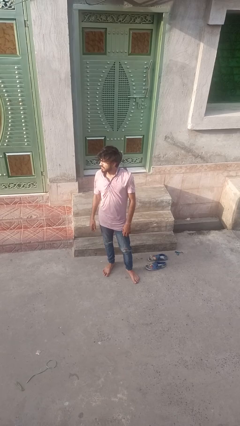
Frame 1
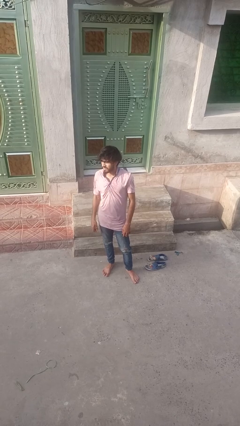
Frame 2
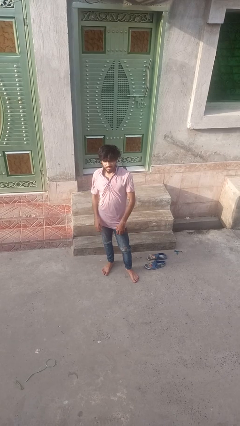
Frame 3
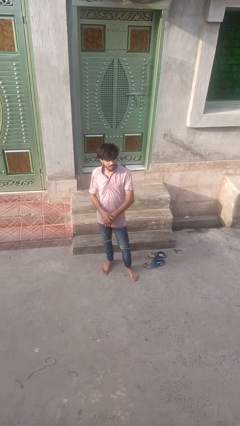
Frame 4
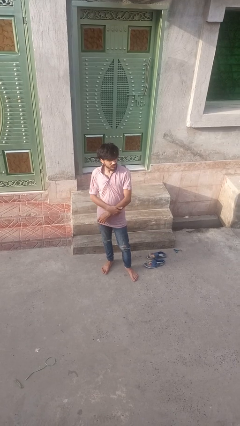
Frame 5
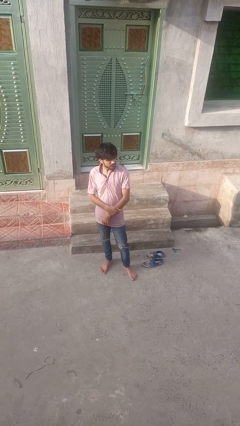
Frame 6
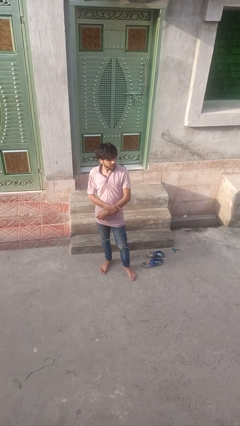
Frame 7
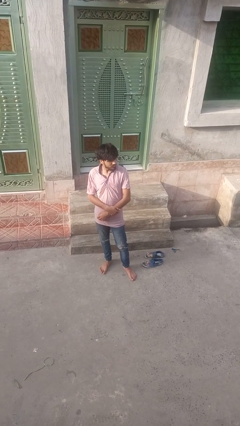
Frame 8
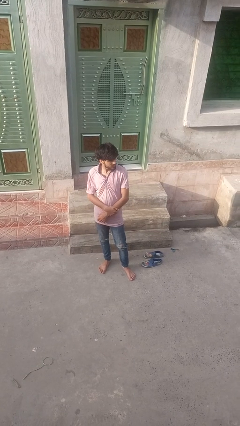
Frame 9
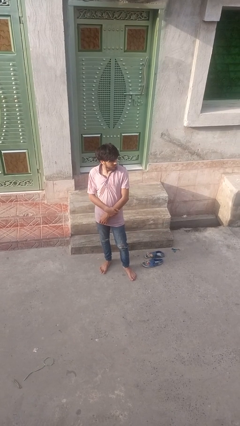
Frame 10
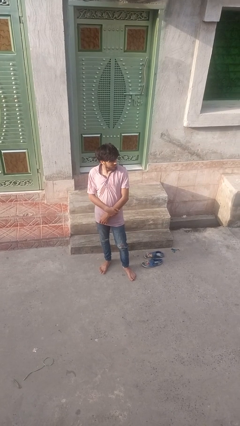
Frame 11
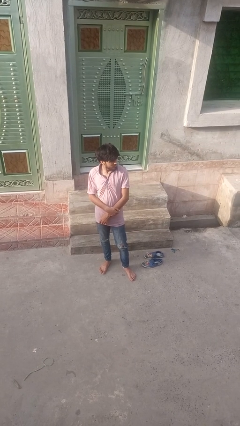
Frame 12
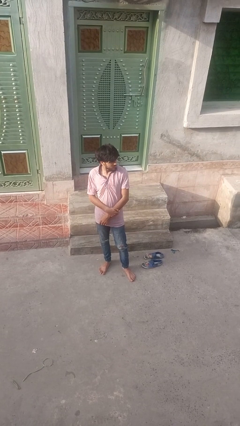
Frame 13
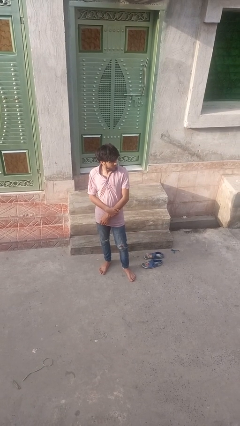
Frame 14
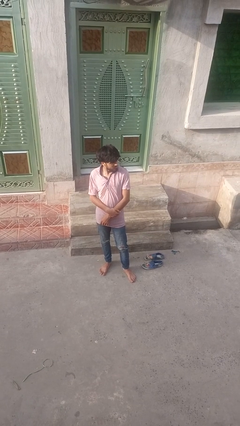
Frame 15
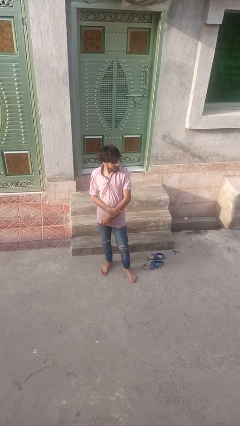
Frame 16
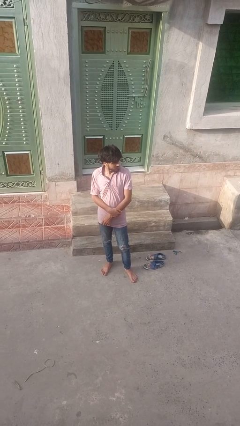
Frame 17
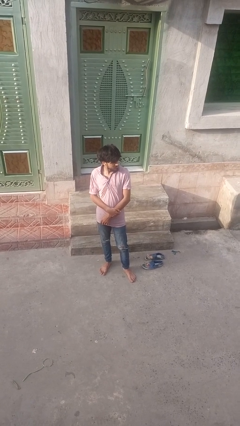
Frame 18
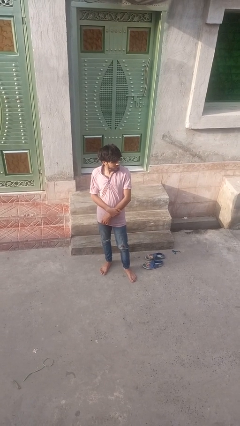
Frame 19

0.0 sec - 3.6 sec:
person crosses arms

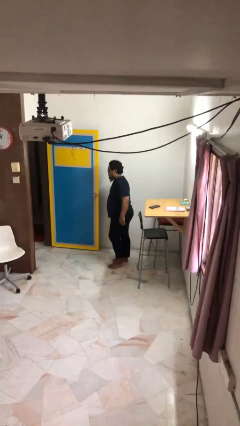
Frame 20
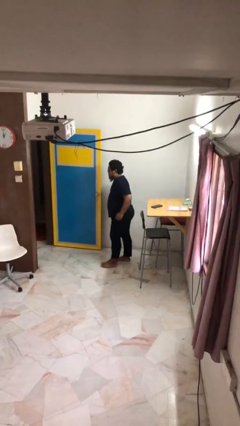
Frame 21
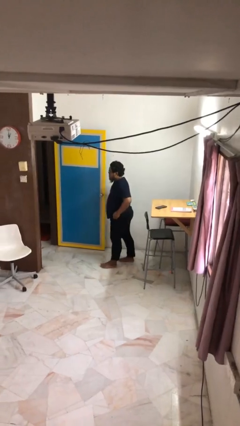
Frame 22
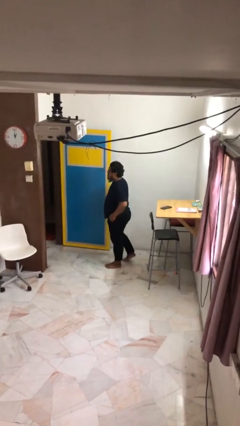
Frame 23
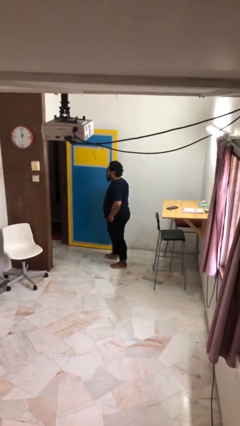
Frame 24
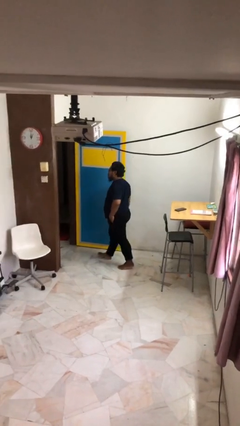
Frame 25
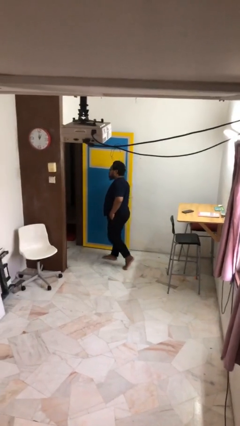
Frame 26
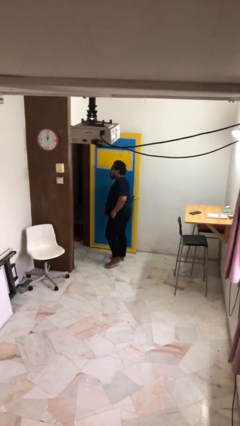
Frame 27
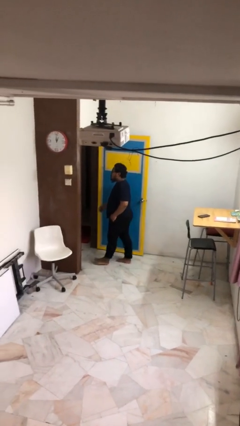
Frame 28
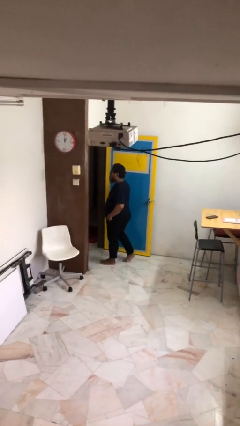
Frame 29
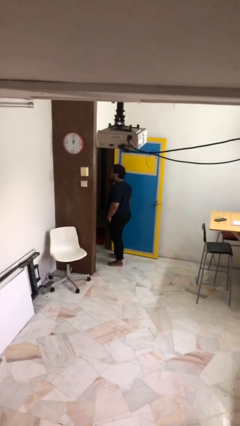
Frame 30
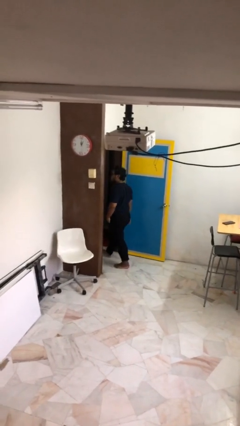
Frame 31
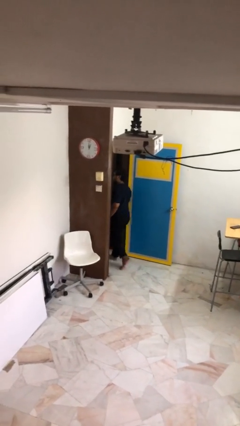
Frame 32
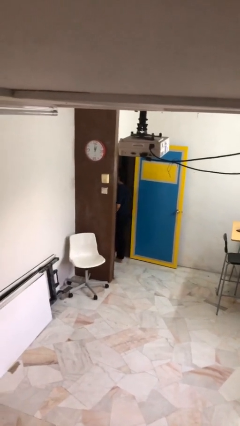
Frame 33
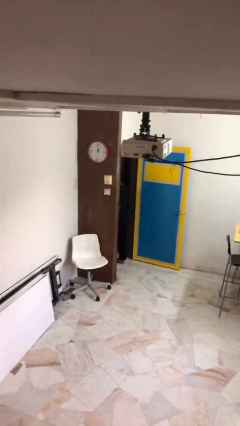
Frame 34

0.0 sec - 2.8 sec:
person exits scene through structure

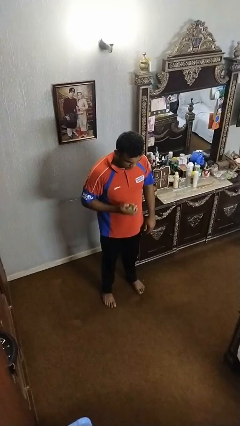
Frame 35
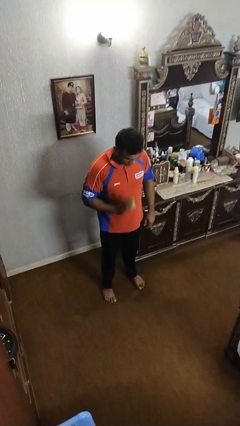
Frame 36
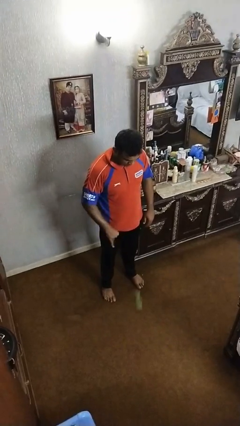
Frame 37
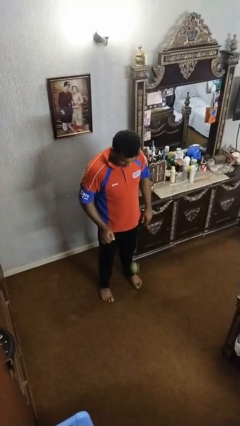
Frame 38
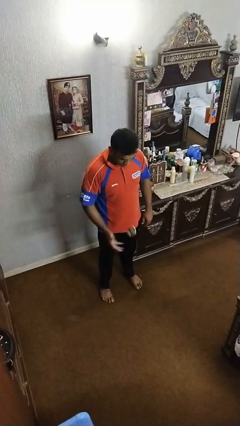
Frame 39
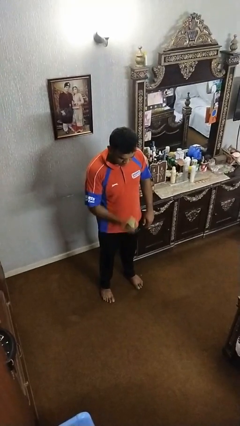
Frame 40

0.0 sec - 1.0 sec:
person bounces ball on floor

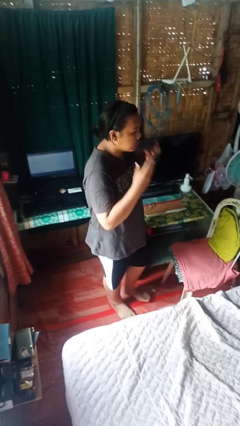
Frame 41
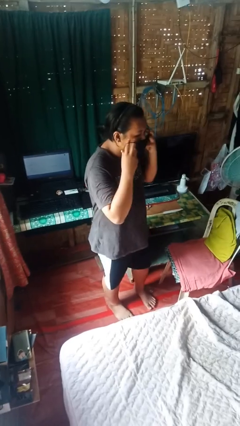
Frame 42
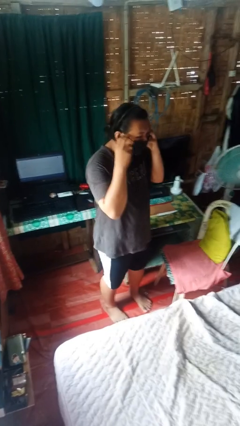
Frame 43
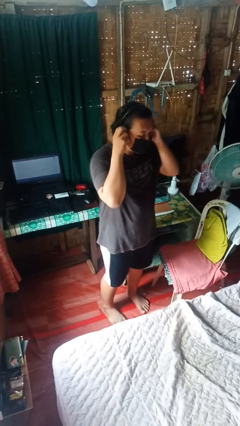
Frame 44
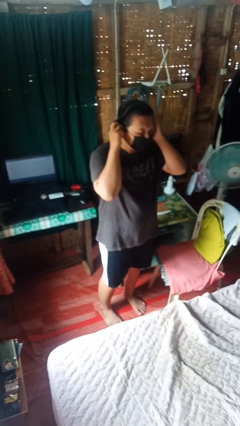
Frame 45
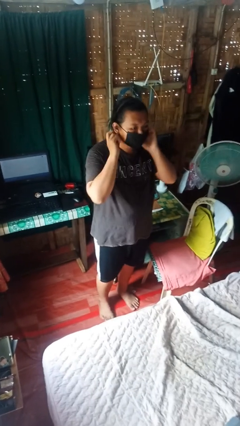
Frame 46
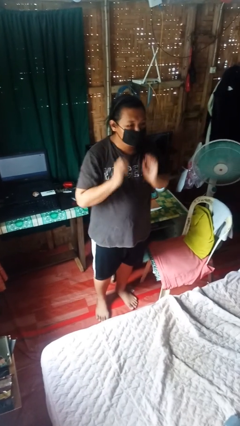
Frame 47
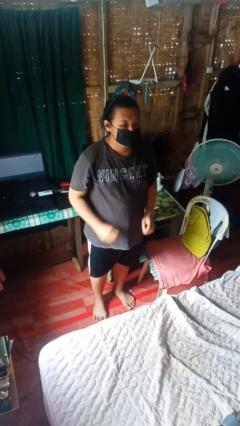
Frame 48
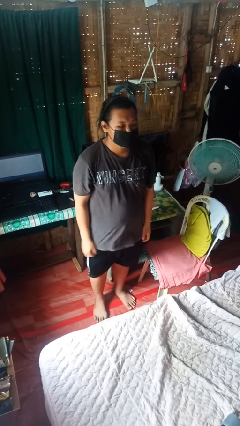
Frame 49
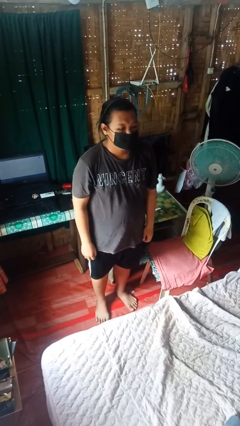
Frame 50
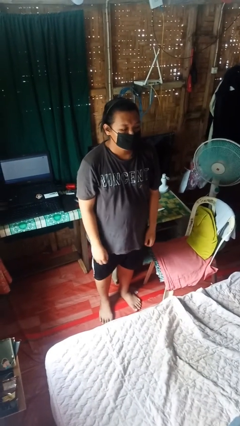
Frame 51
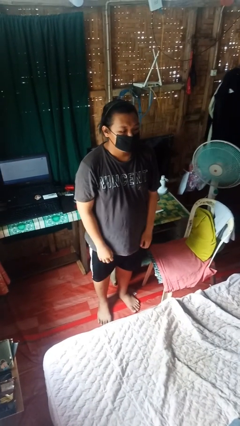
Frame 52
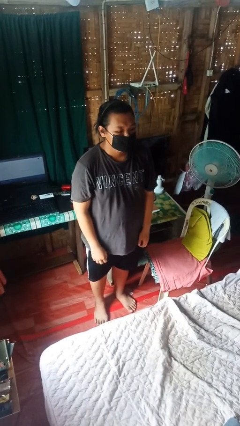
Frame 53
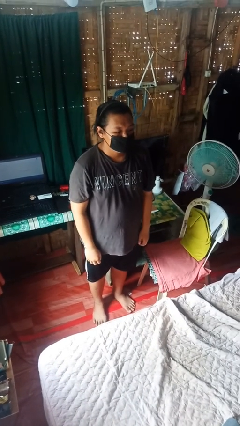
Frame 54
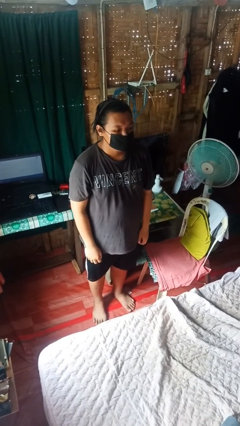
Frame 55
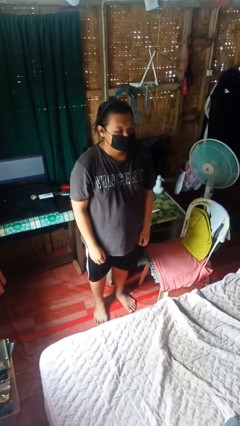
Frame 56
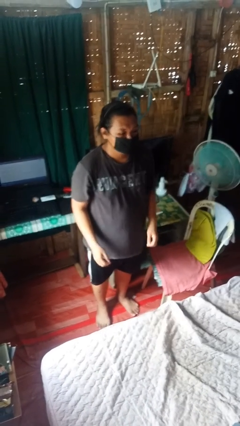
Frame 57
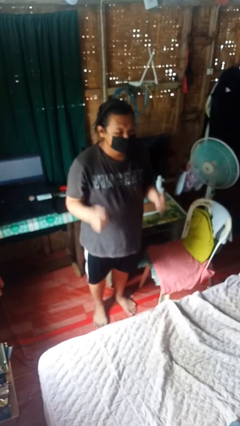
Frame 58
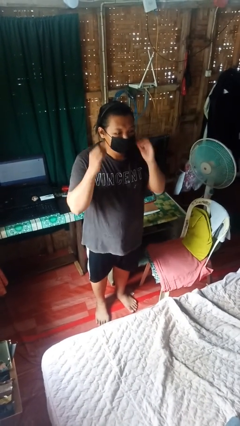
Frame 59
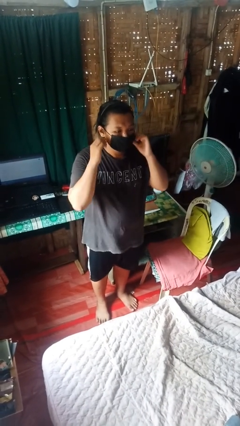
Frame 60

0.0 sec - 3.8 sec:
person puts on facemask

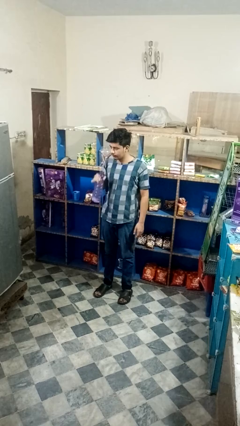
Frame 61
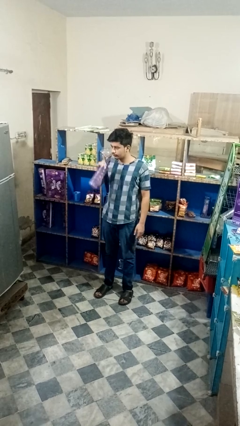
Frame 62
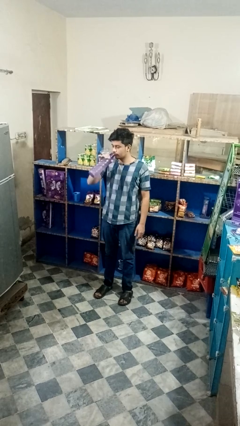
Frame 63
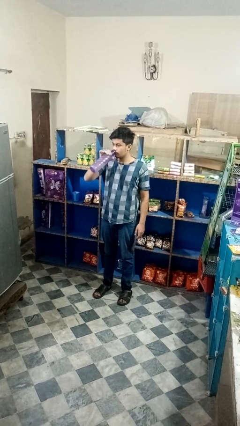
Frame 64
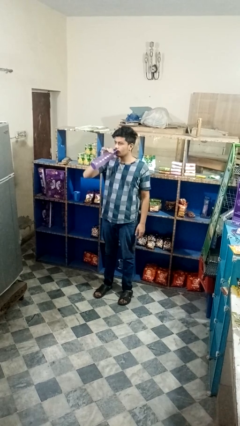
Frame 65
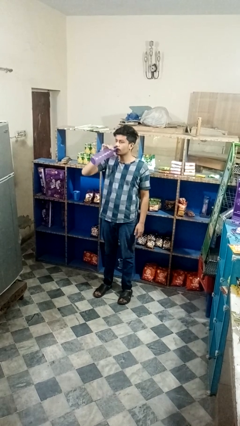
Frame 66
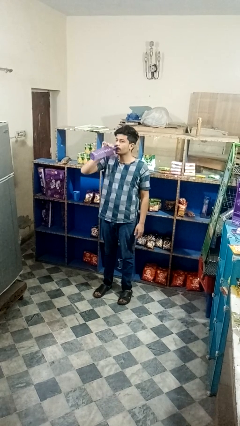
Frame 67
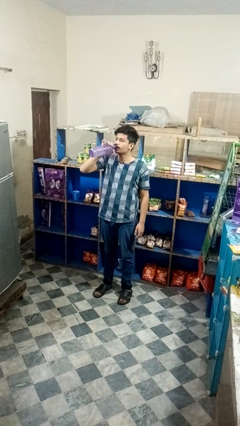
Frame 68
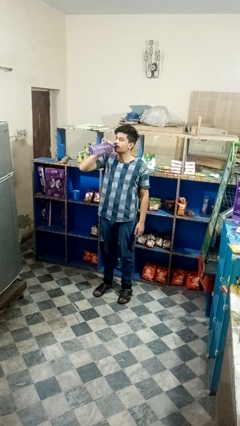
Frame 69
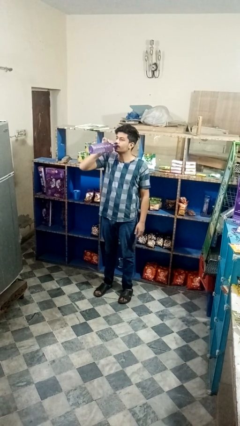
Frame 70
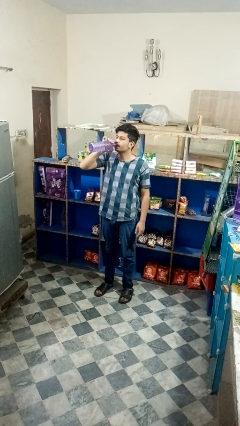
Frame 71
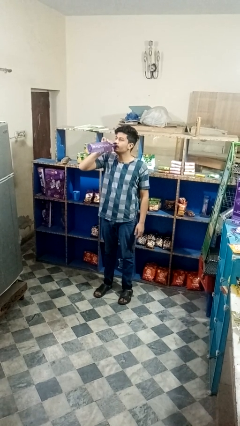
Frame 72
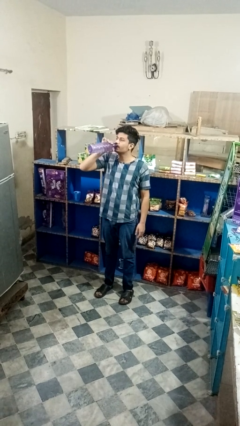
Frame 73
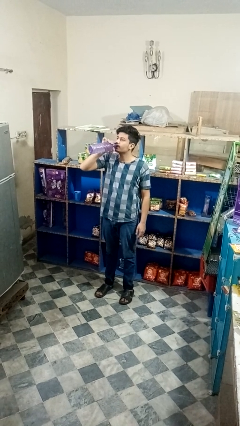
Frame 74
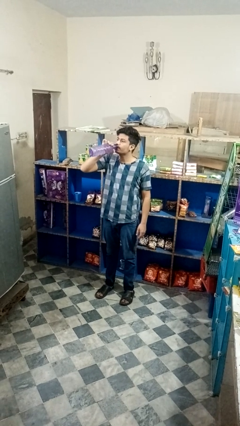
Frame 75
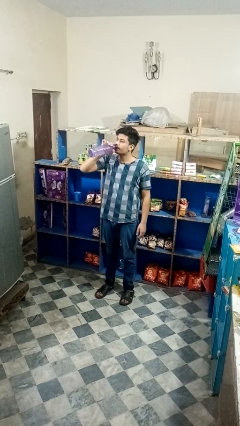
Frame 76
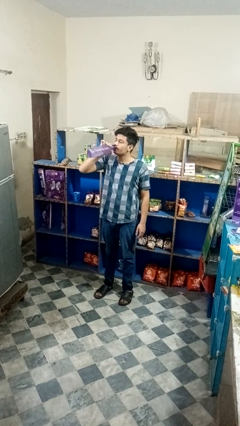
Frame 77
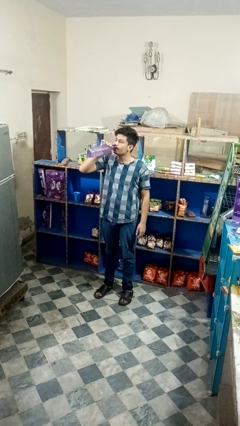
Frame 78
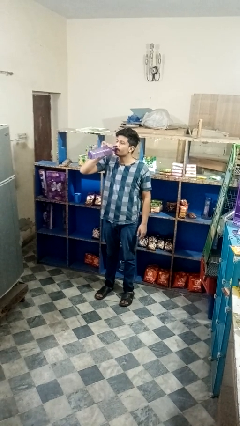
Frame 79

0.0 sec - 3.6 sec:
person drinks from bottle

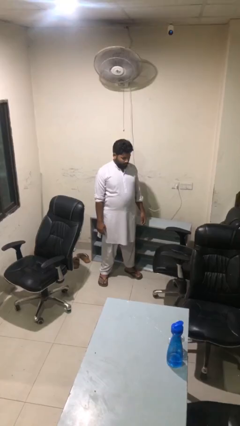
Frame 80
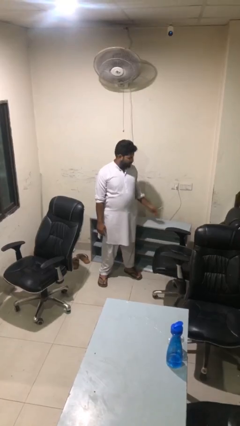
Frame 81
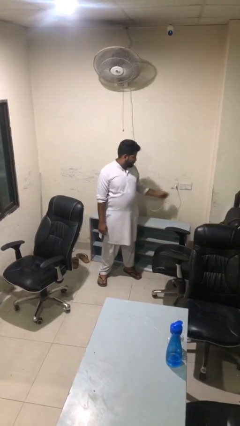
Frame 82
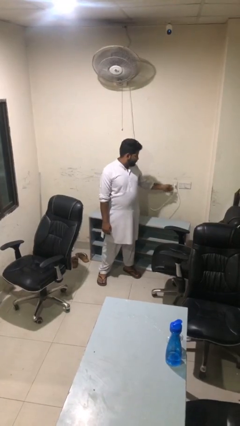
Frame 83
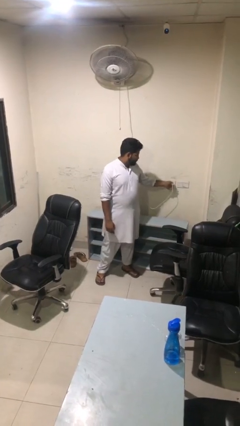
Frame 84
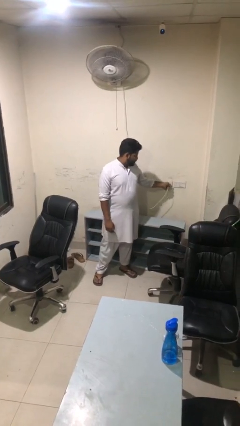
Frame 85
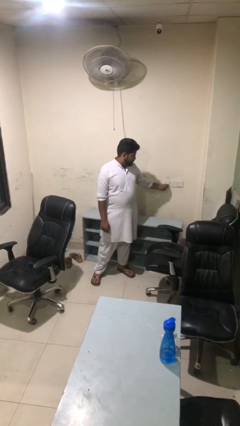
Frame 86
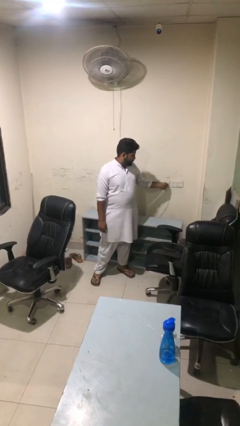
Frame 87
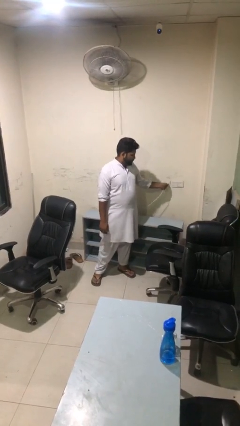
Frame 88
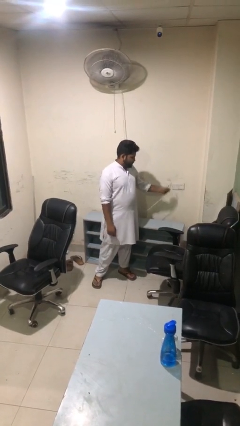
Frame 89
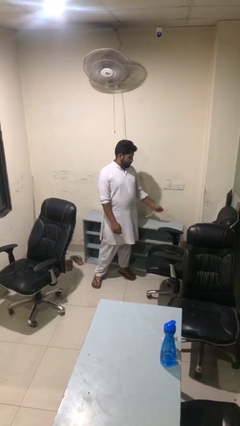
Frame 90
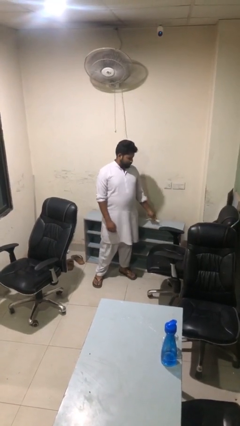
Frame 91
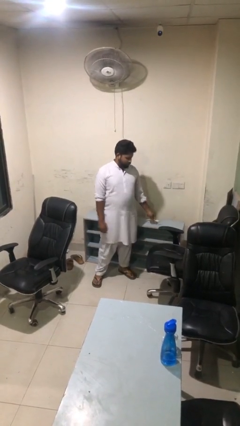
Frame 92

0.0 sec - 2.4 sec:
person unplugs from electrical socket

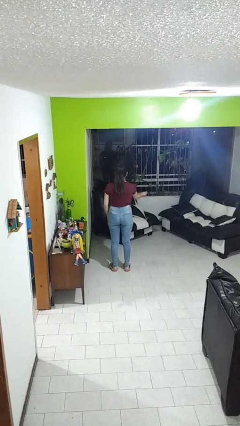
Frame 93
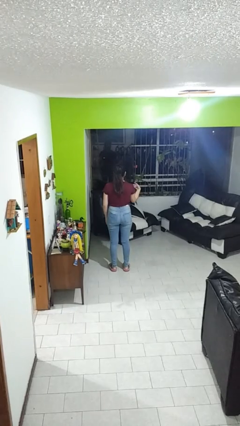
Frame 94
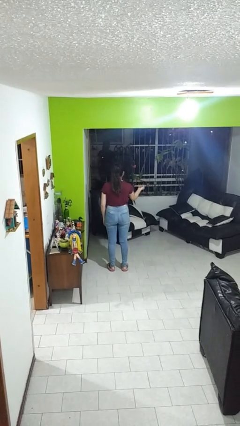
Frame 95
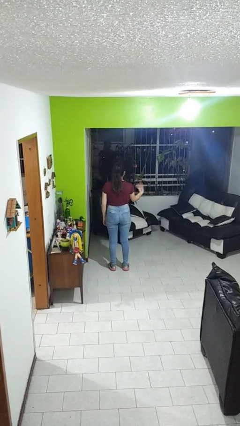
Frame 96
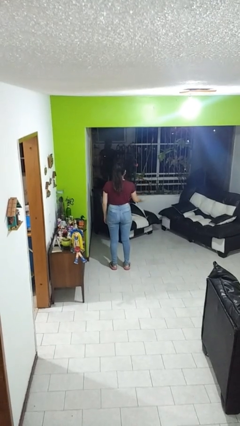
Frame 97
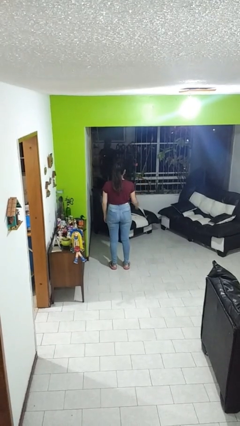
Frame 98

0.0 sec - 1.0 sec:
person gestures come here
